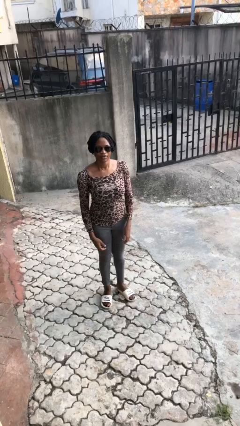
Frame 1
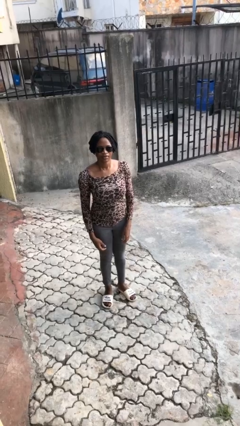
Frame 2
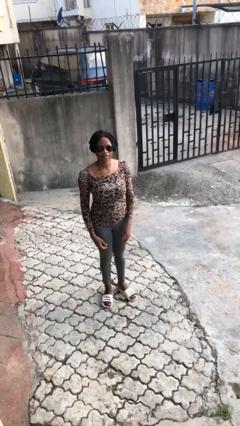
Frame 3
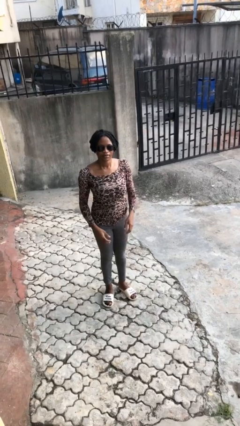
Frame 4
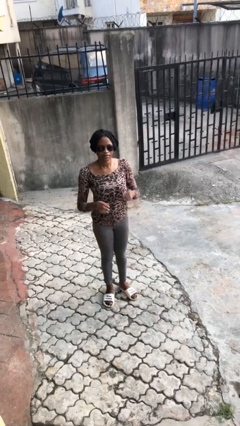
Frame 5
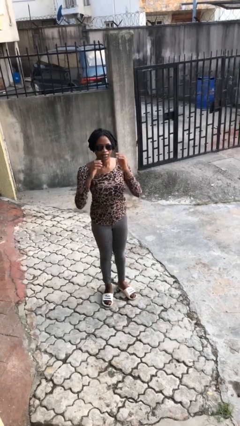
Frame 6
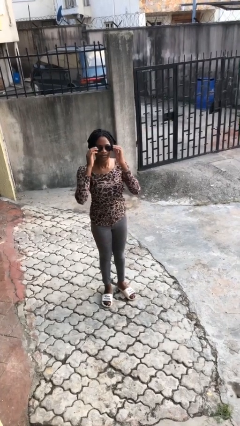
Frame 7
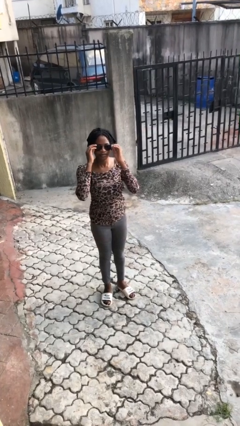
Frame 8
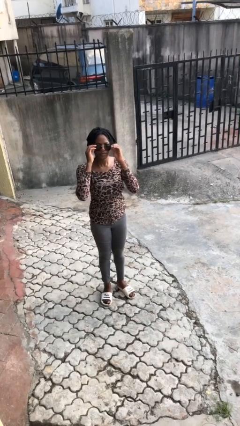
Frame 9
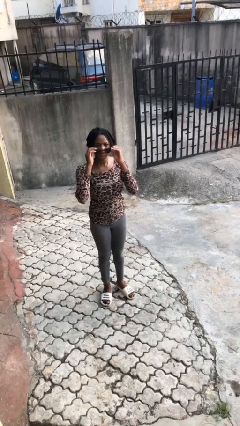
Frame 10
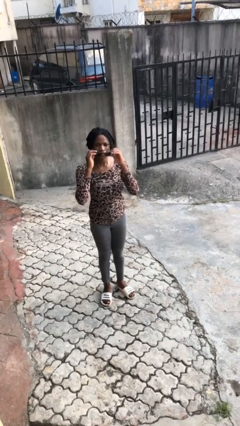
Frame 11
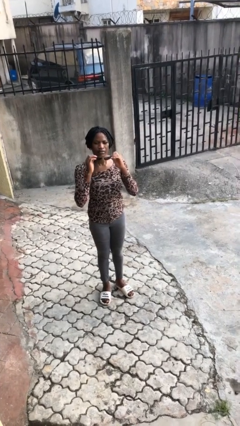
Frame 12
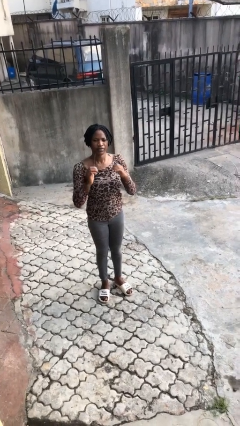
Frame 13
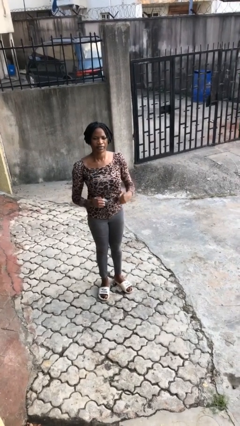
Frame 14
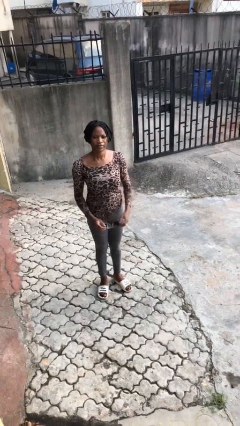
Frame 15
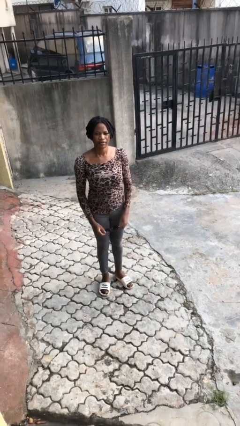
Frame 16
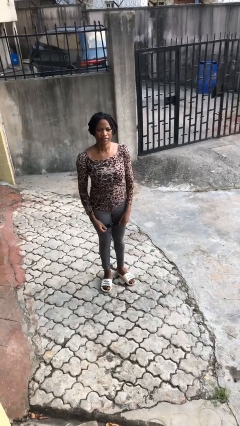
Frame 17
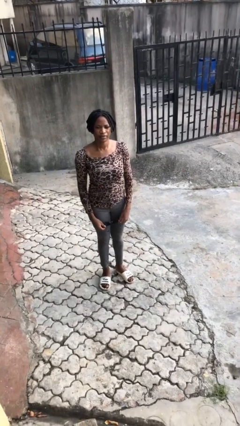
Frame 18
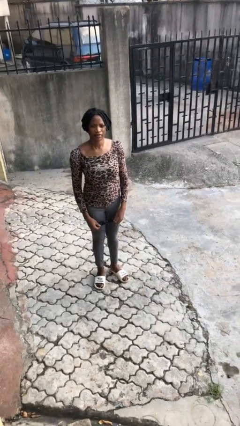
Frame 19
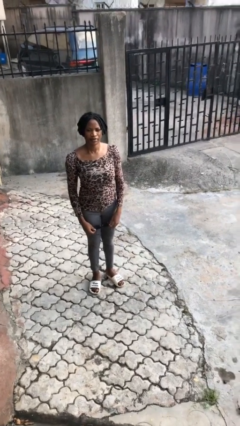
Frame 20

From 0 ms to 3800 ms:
person takes off sunglasses

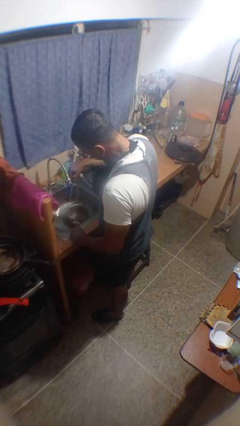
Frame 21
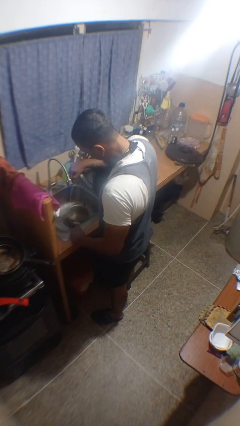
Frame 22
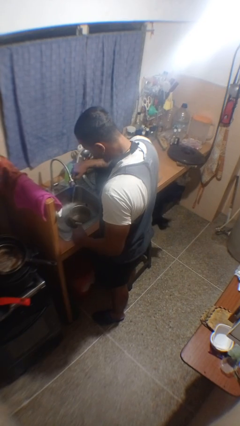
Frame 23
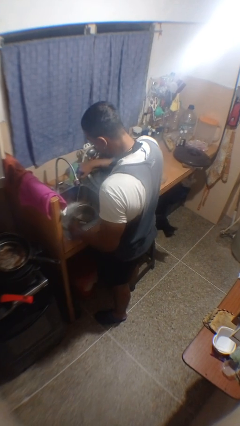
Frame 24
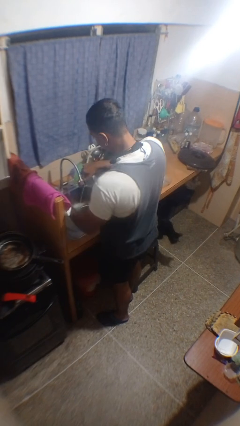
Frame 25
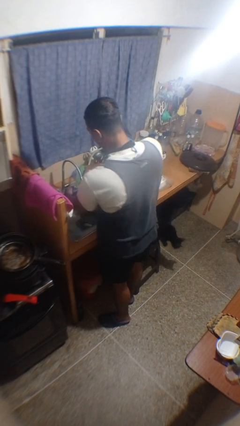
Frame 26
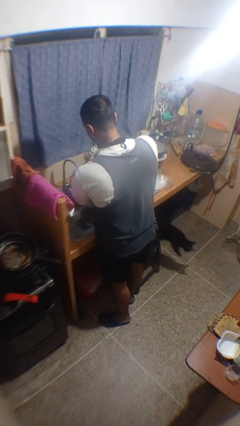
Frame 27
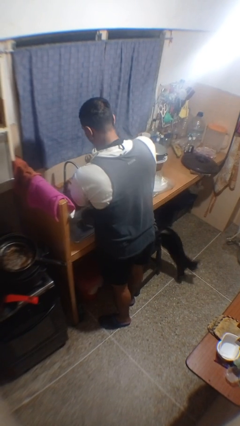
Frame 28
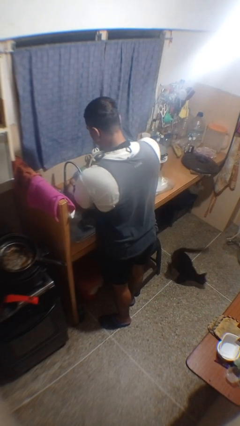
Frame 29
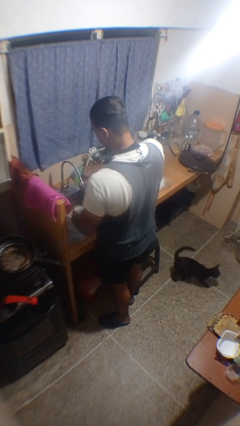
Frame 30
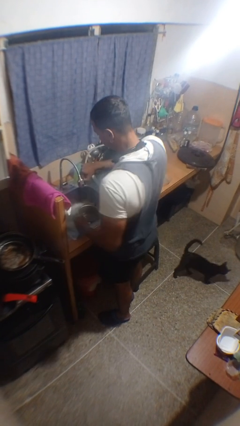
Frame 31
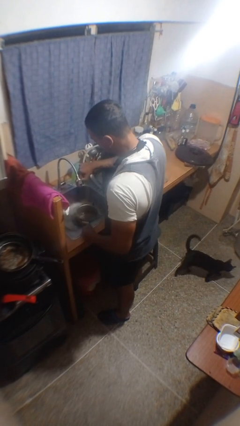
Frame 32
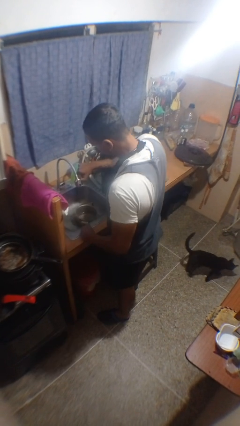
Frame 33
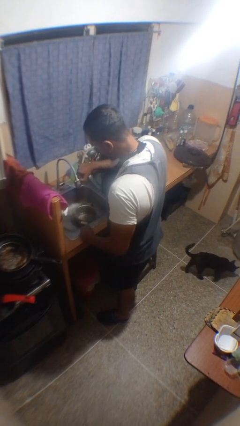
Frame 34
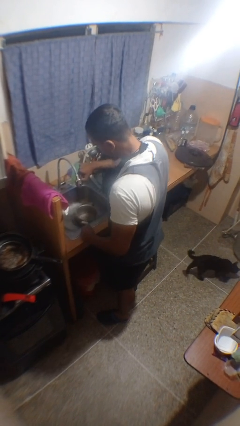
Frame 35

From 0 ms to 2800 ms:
person turns off faucet

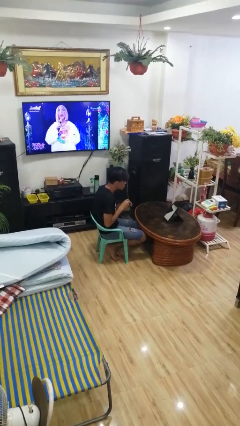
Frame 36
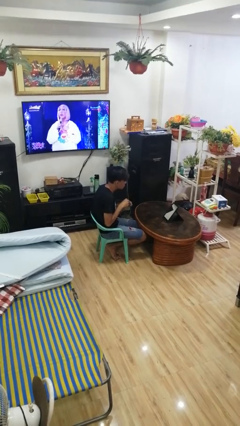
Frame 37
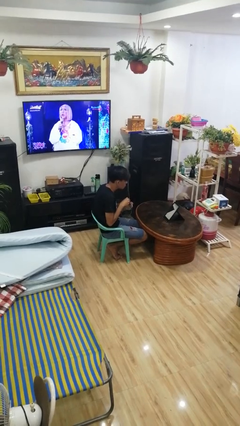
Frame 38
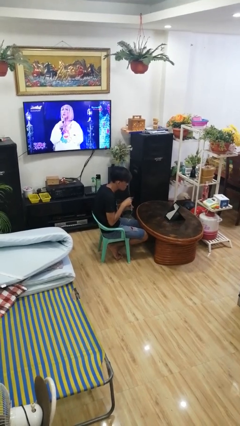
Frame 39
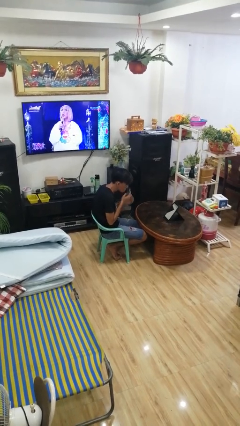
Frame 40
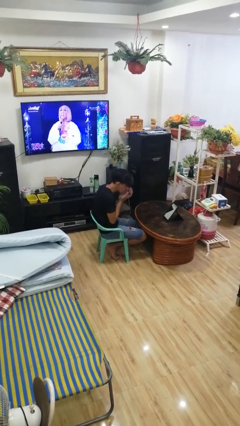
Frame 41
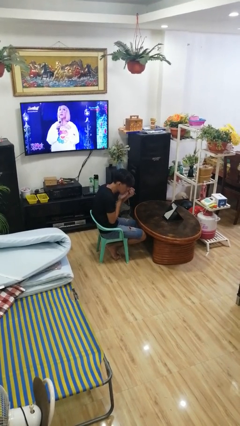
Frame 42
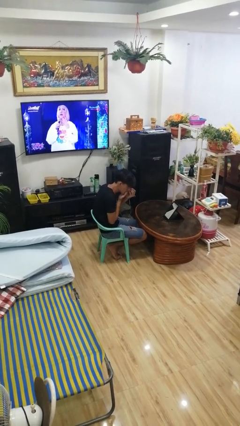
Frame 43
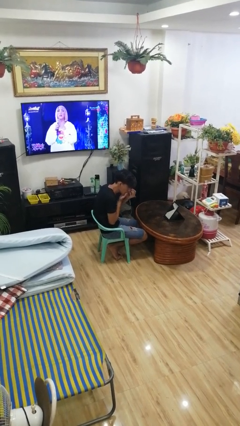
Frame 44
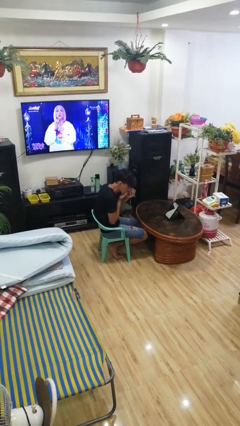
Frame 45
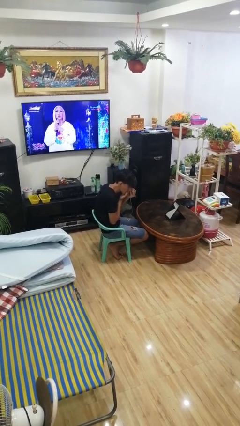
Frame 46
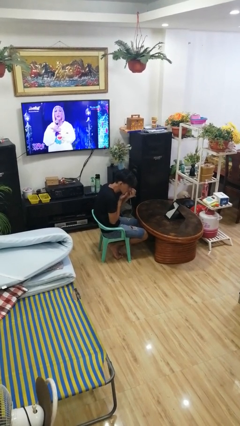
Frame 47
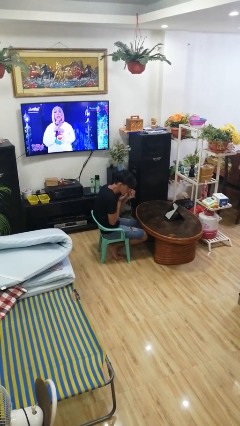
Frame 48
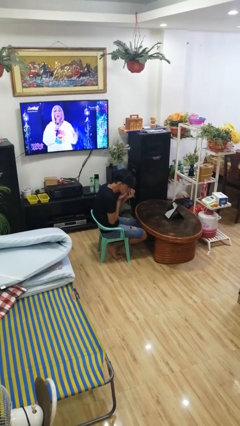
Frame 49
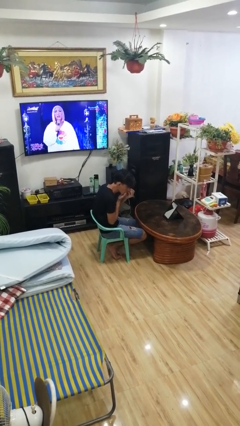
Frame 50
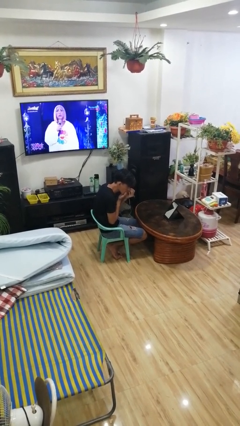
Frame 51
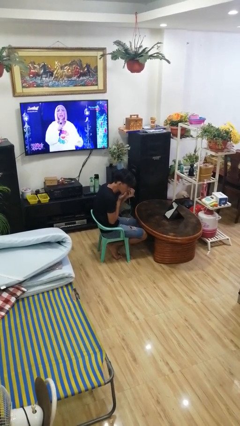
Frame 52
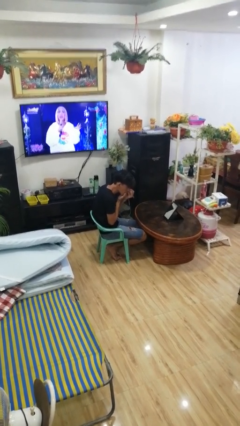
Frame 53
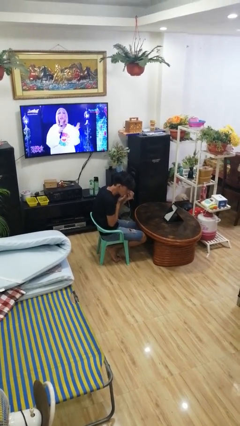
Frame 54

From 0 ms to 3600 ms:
person applies eye makeup

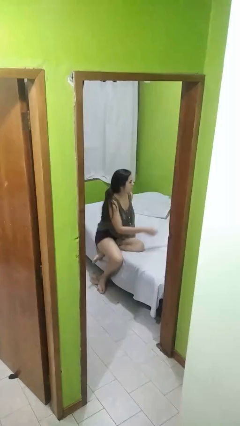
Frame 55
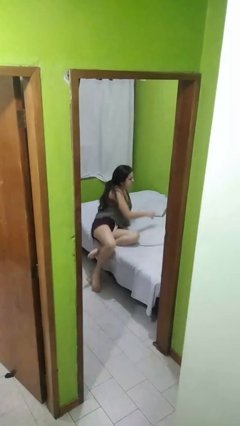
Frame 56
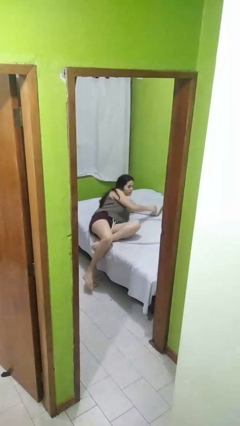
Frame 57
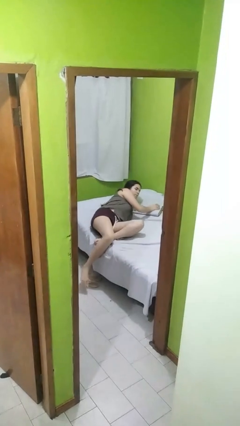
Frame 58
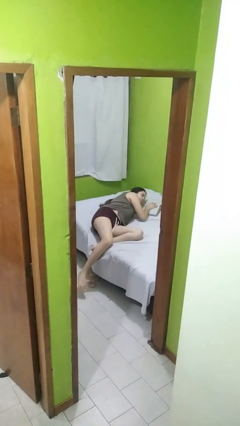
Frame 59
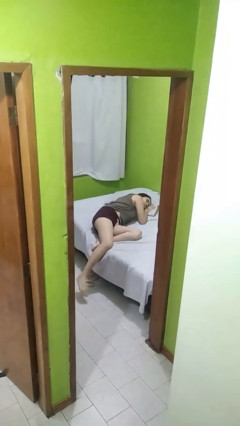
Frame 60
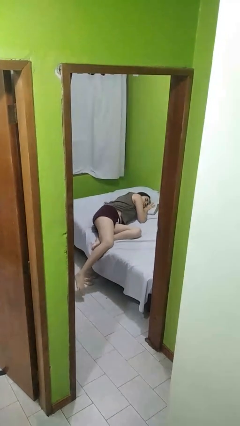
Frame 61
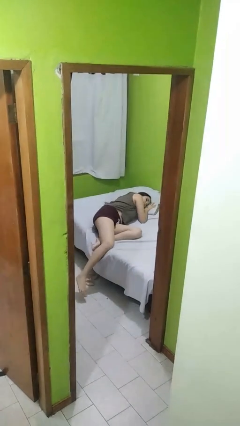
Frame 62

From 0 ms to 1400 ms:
person lies down on bed

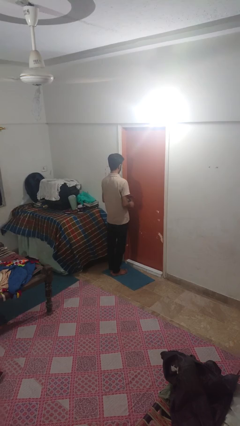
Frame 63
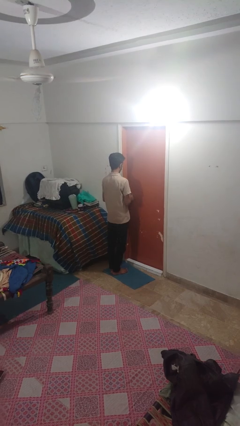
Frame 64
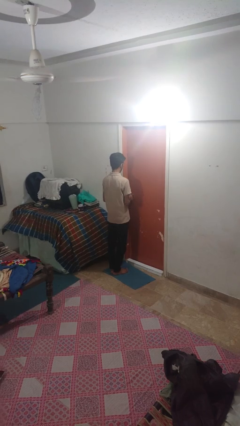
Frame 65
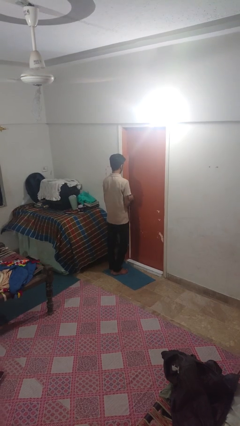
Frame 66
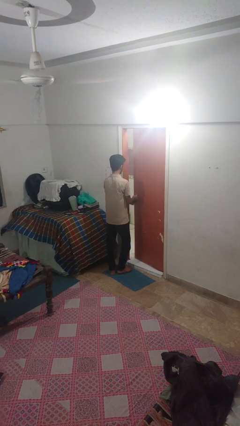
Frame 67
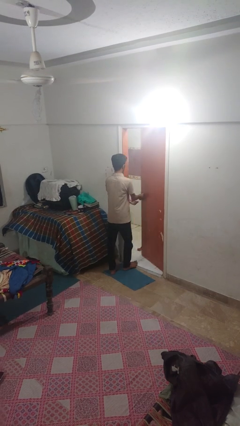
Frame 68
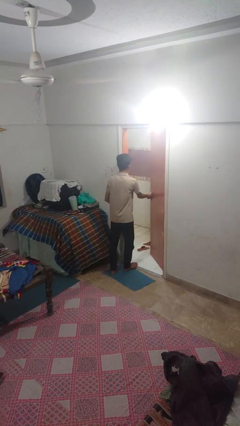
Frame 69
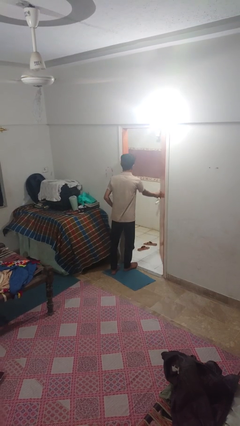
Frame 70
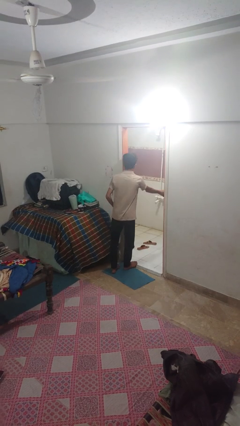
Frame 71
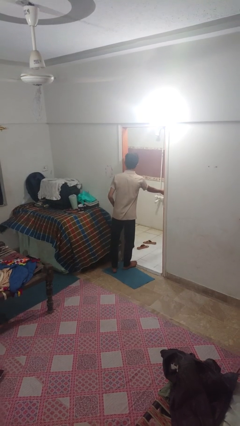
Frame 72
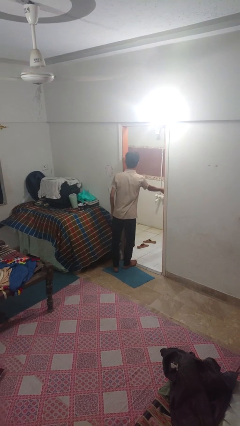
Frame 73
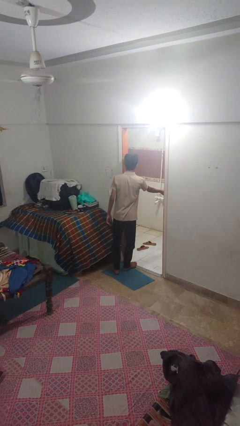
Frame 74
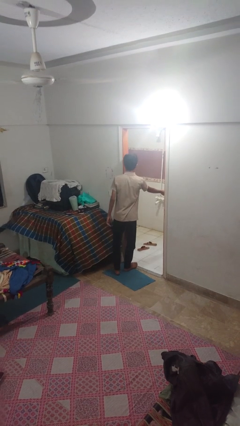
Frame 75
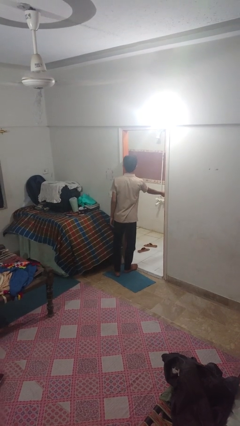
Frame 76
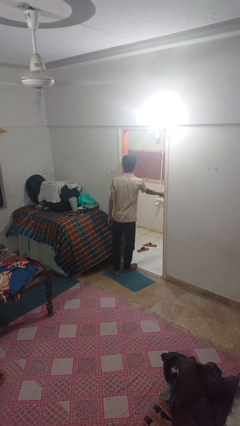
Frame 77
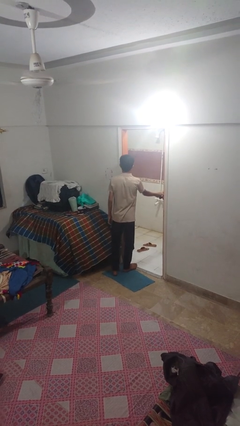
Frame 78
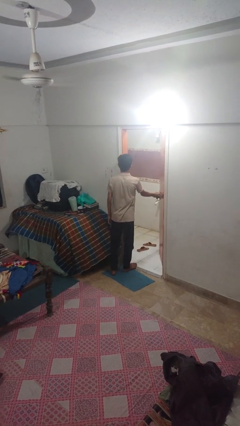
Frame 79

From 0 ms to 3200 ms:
person opens facility door

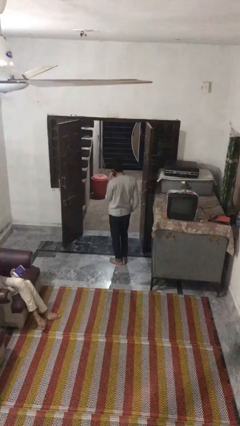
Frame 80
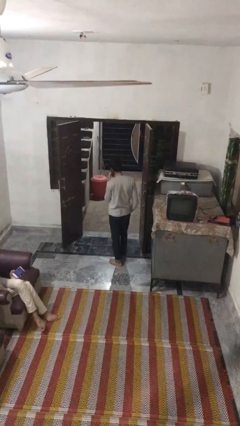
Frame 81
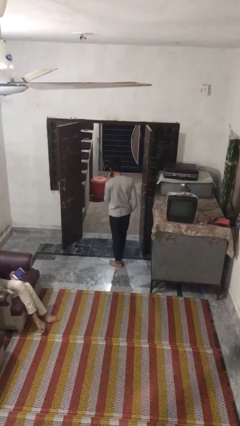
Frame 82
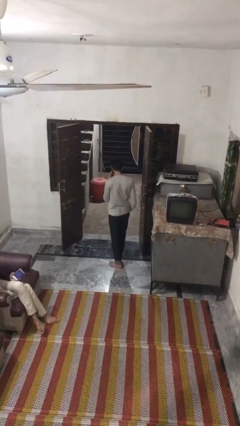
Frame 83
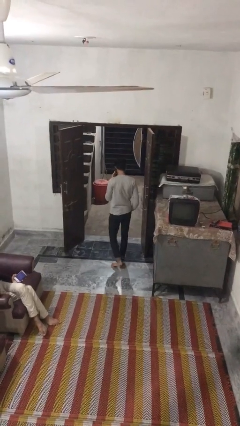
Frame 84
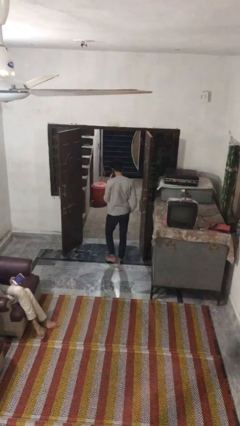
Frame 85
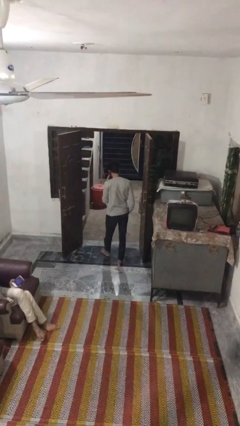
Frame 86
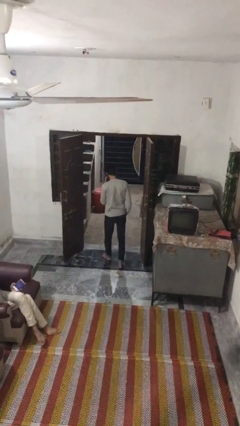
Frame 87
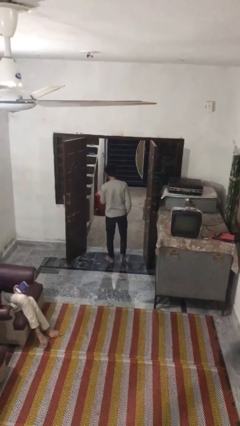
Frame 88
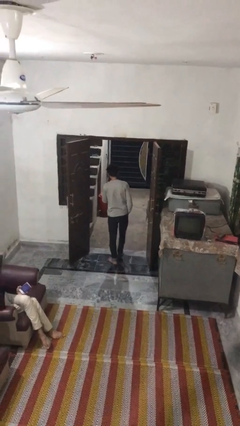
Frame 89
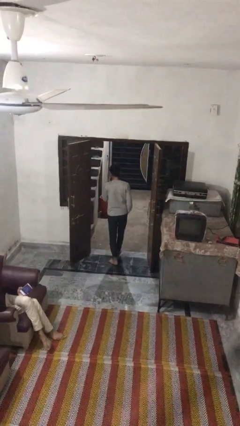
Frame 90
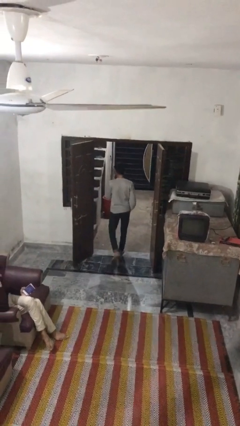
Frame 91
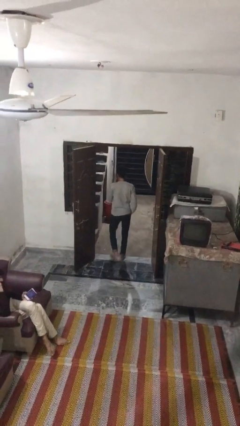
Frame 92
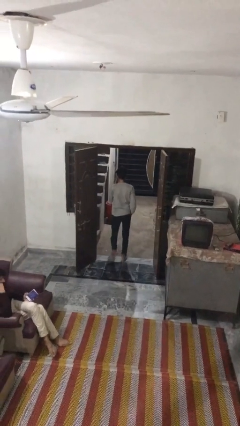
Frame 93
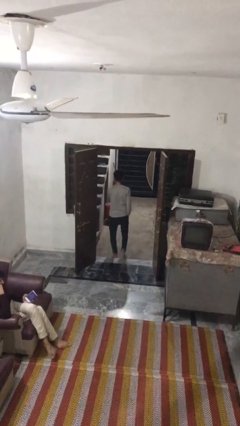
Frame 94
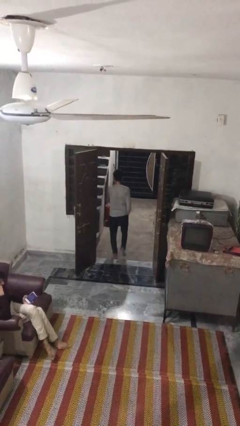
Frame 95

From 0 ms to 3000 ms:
person exits scene through structure
